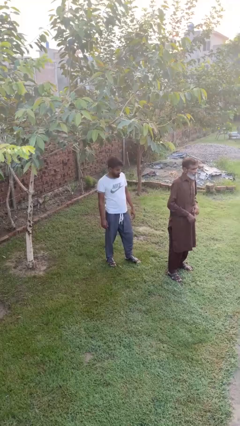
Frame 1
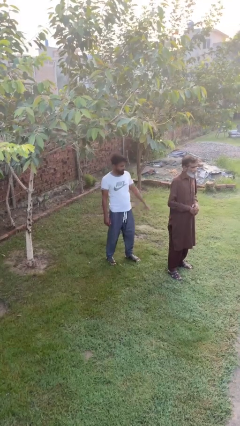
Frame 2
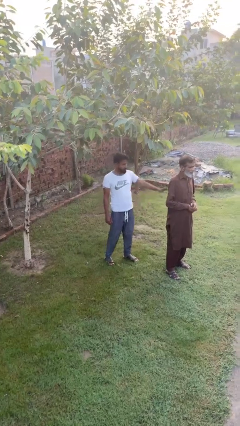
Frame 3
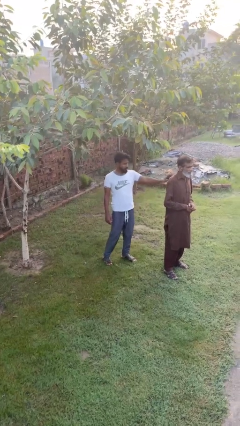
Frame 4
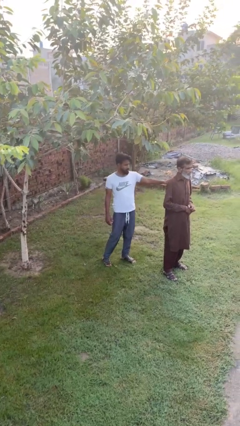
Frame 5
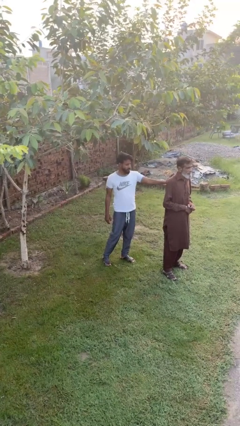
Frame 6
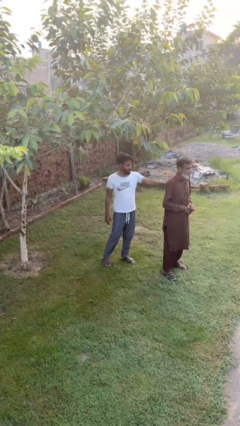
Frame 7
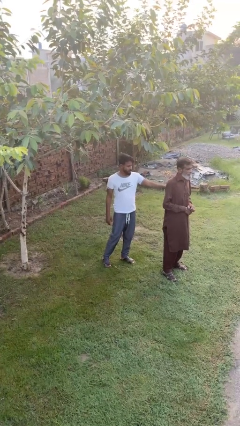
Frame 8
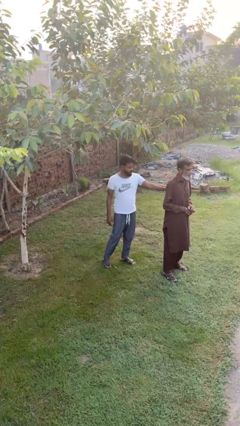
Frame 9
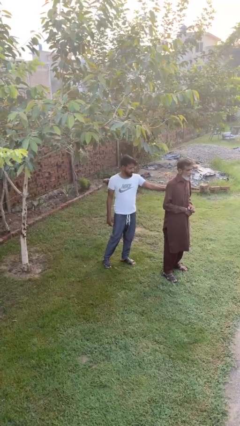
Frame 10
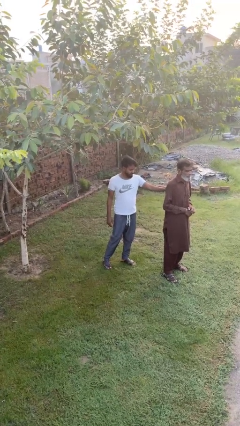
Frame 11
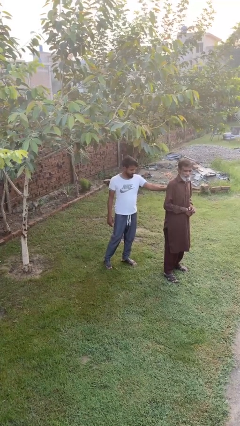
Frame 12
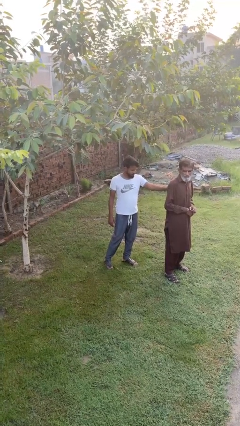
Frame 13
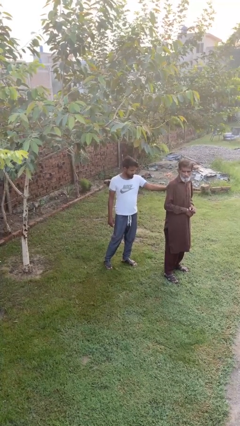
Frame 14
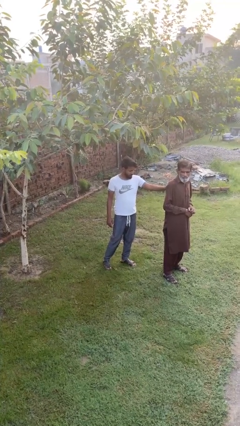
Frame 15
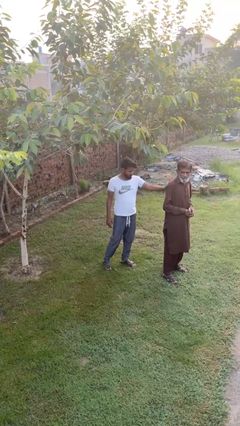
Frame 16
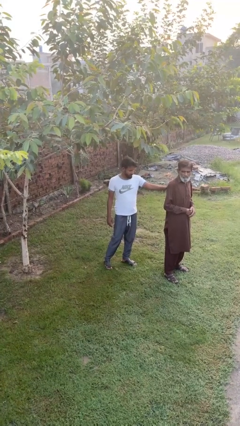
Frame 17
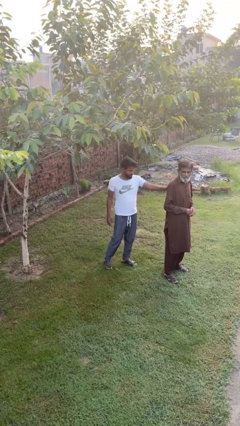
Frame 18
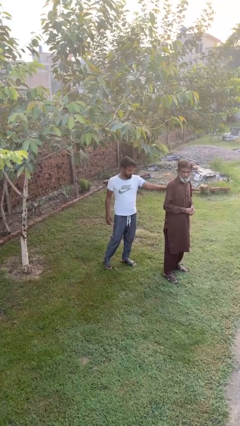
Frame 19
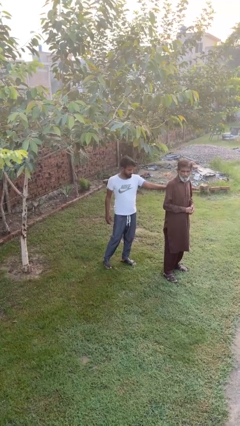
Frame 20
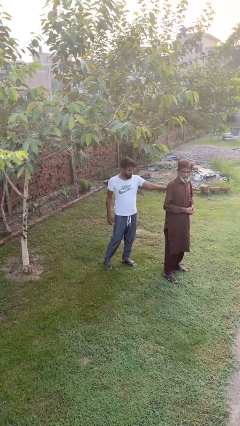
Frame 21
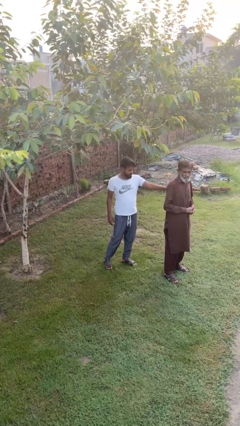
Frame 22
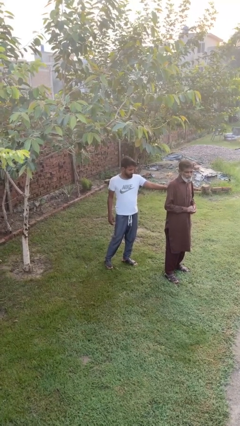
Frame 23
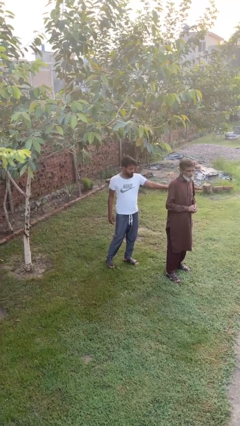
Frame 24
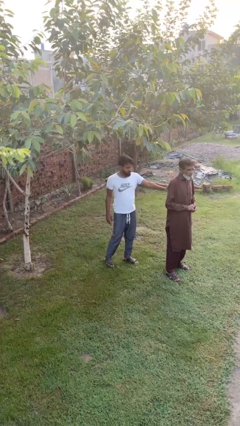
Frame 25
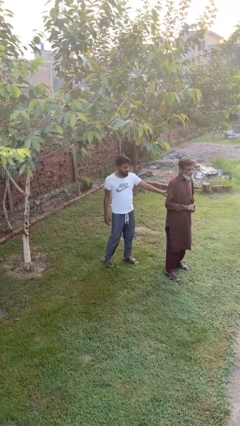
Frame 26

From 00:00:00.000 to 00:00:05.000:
person touches back of person

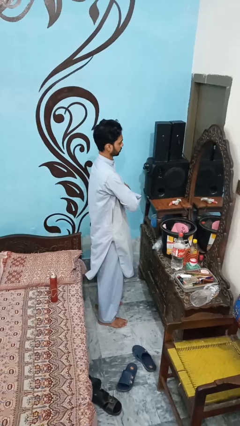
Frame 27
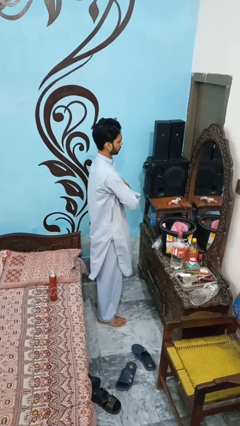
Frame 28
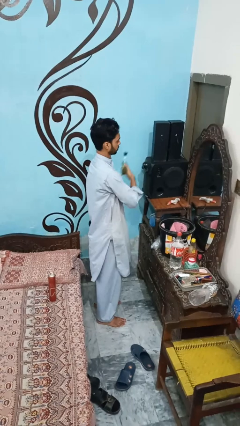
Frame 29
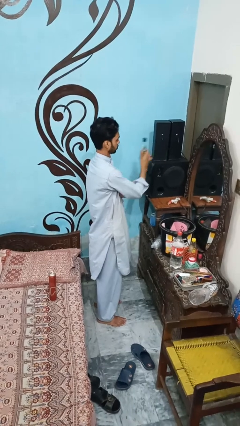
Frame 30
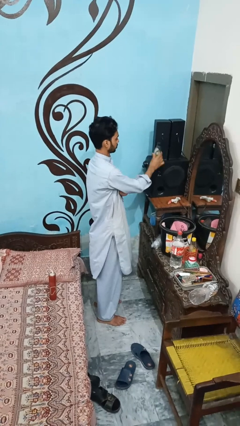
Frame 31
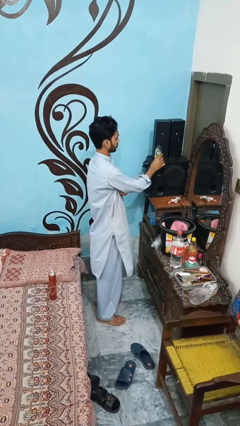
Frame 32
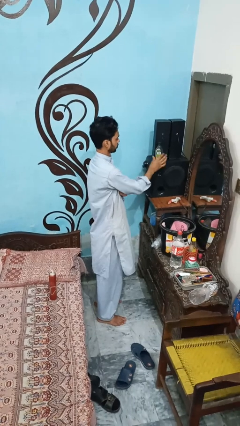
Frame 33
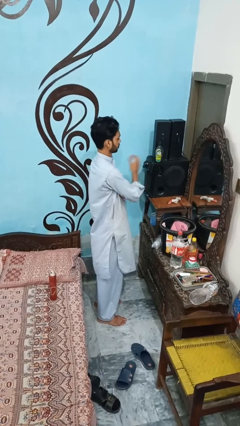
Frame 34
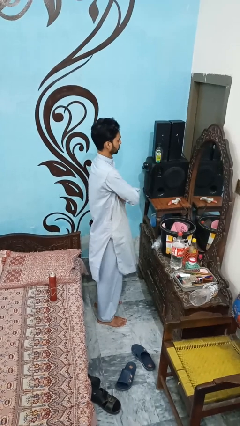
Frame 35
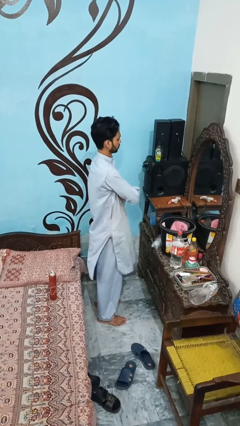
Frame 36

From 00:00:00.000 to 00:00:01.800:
person picks up object from shelf

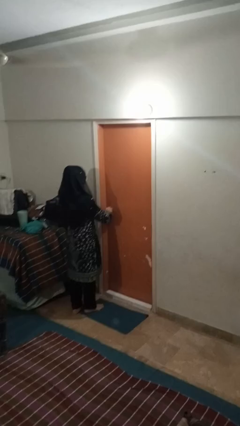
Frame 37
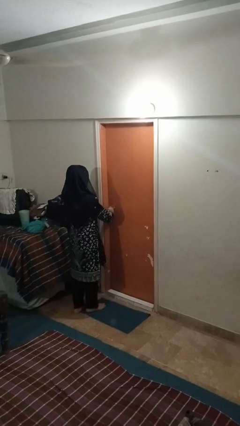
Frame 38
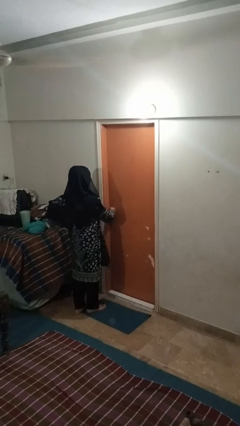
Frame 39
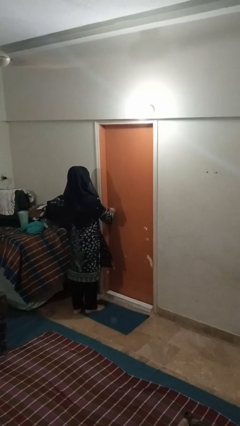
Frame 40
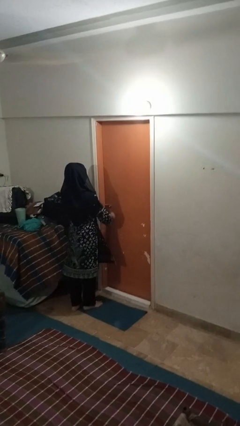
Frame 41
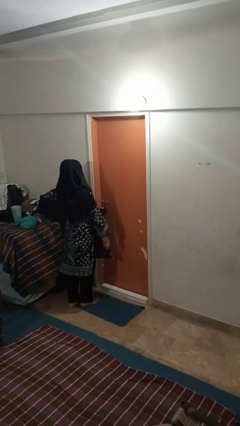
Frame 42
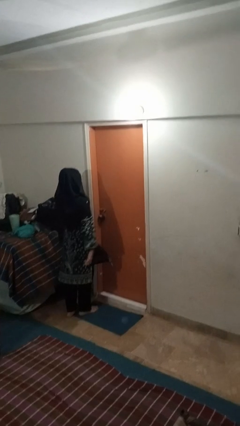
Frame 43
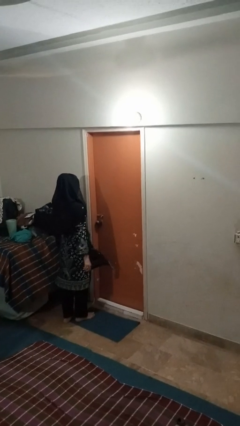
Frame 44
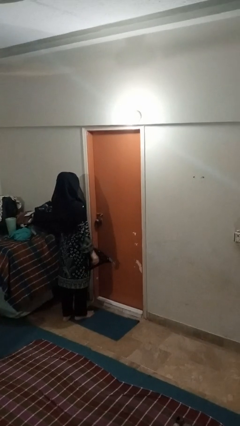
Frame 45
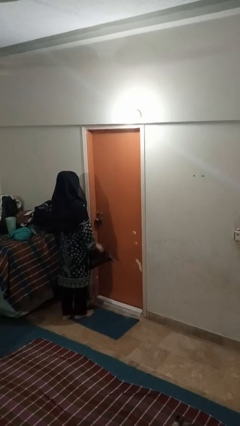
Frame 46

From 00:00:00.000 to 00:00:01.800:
person unlocks door with keys

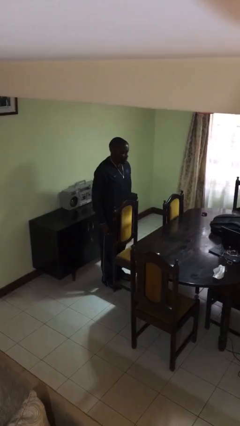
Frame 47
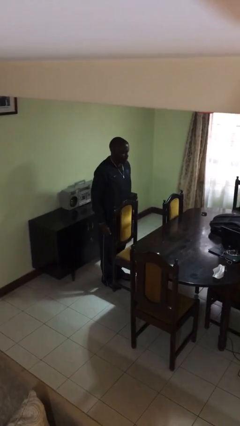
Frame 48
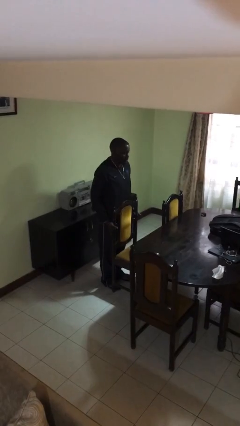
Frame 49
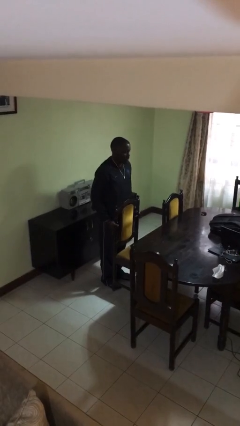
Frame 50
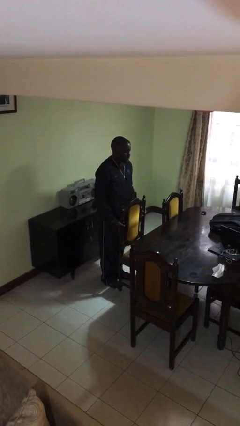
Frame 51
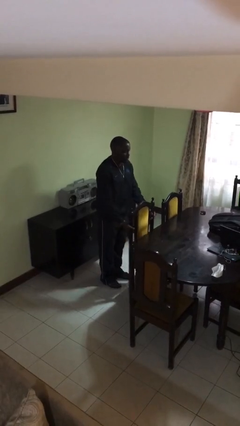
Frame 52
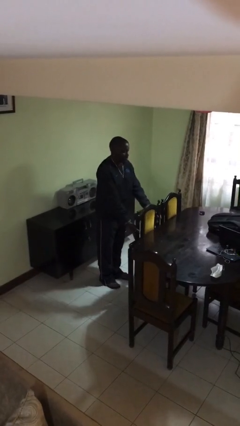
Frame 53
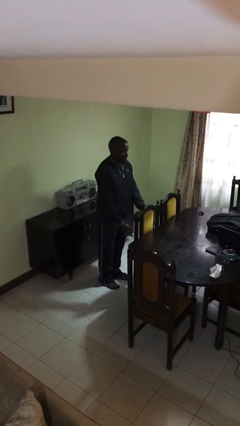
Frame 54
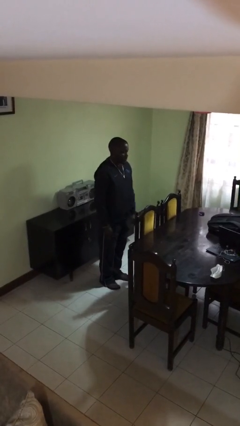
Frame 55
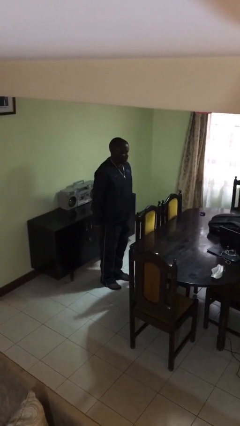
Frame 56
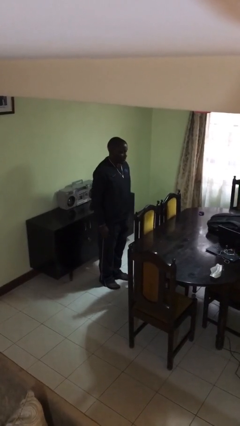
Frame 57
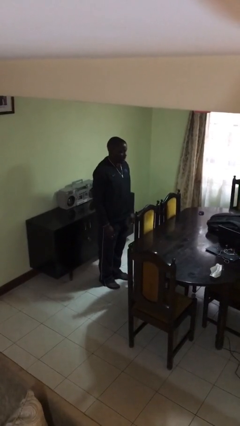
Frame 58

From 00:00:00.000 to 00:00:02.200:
person pushes in chair

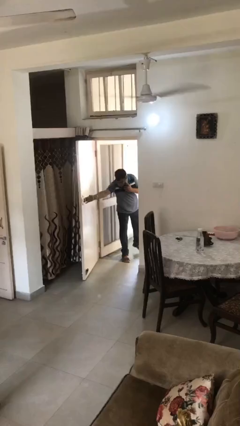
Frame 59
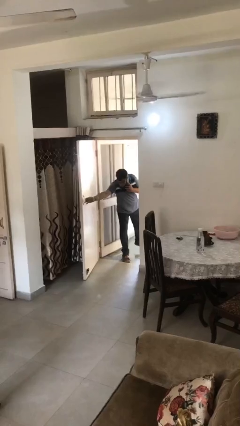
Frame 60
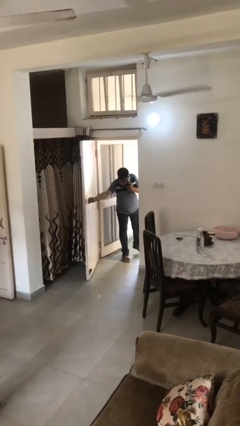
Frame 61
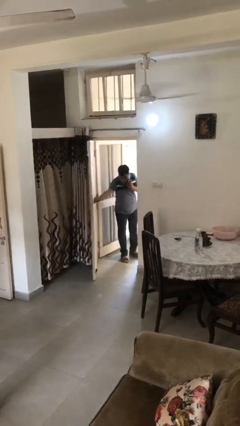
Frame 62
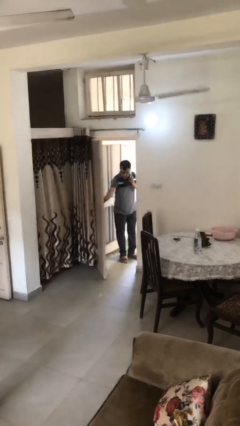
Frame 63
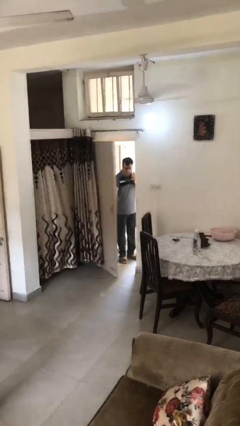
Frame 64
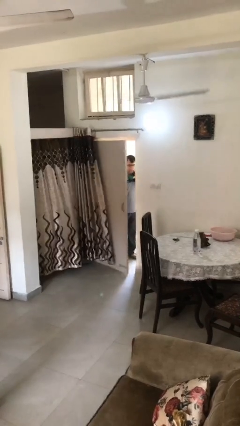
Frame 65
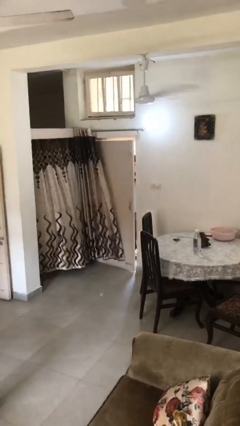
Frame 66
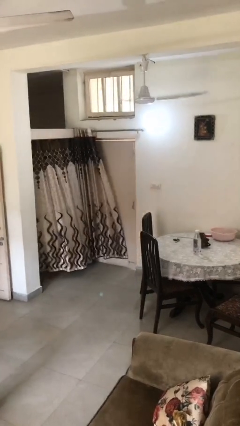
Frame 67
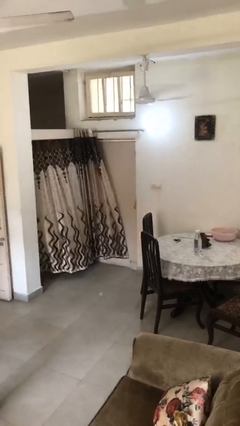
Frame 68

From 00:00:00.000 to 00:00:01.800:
person closes facility door

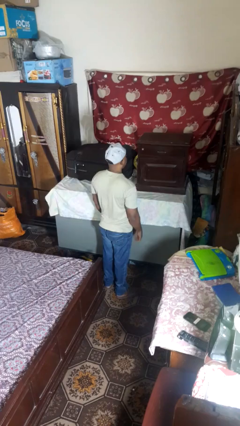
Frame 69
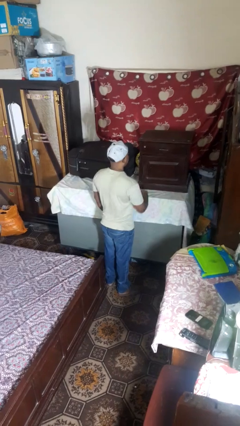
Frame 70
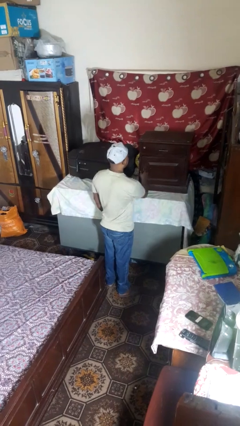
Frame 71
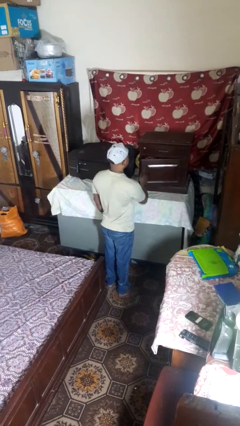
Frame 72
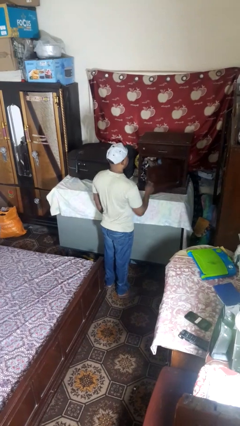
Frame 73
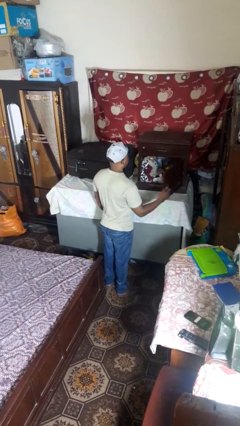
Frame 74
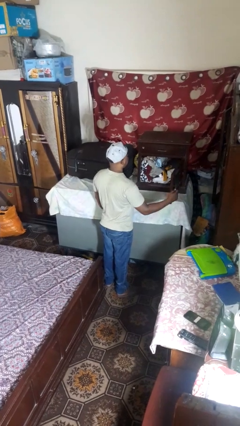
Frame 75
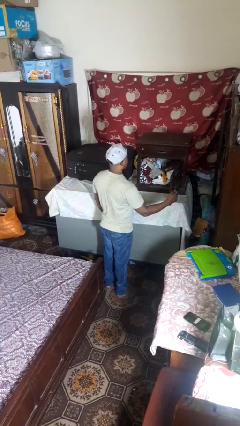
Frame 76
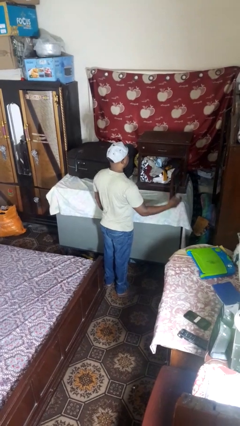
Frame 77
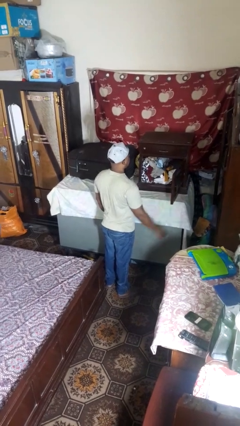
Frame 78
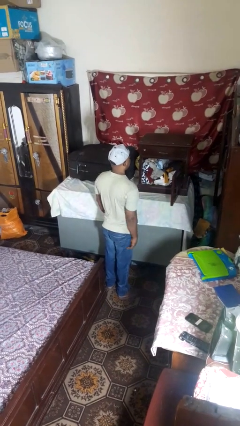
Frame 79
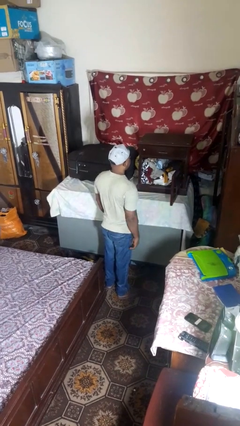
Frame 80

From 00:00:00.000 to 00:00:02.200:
person opens closet door

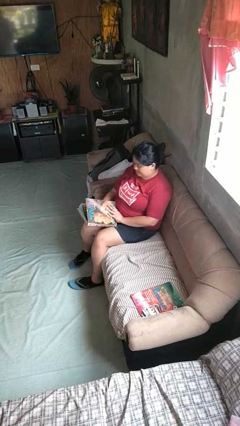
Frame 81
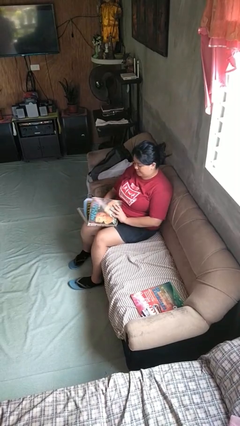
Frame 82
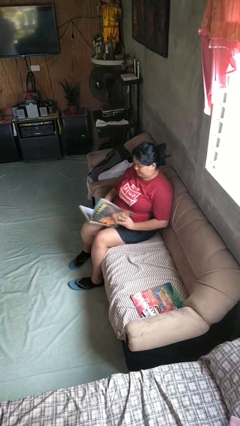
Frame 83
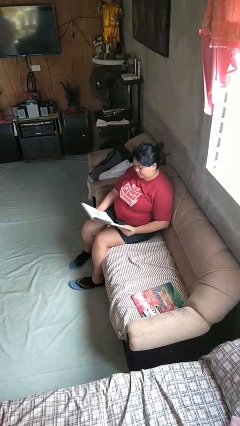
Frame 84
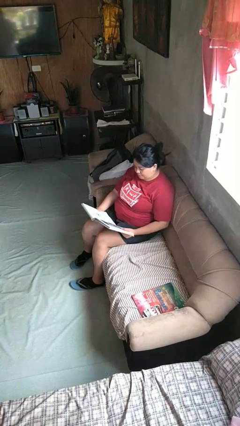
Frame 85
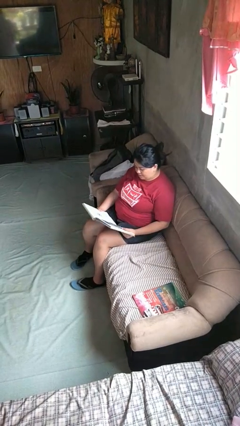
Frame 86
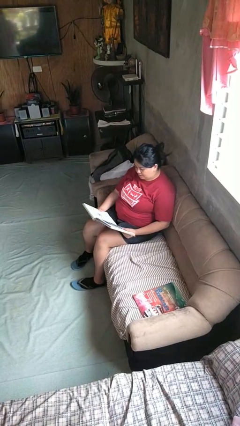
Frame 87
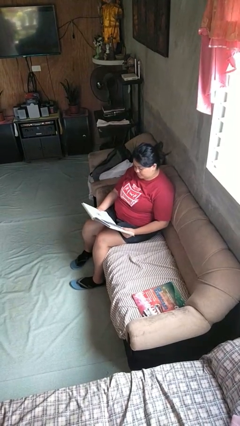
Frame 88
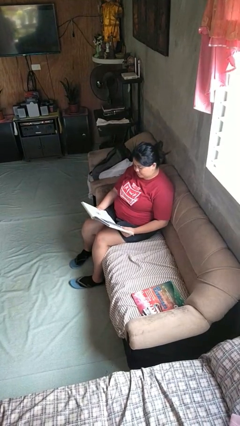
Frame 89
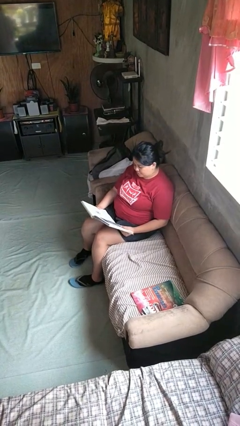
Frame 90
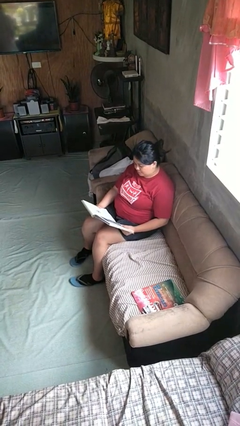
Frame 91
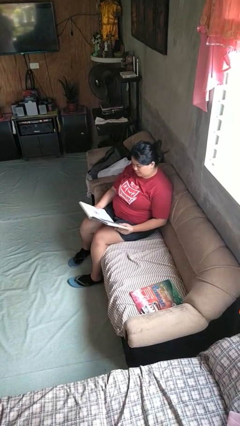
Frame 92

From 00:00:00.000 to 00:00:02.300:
person reads book

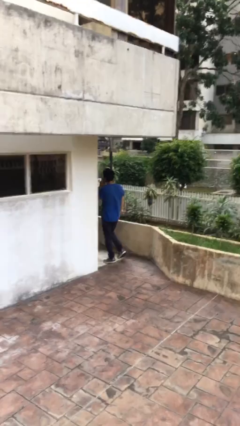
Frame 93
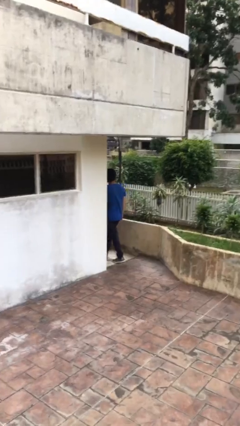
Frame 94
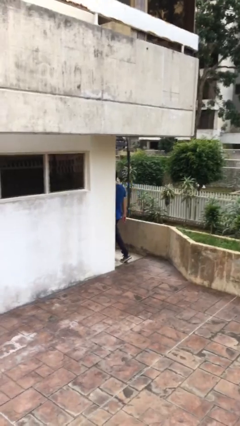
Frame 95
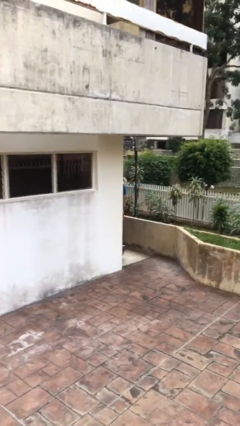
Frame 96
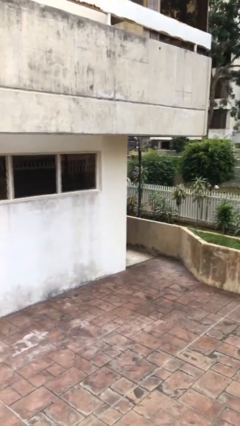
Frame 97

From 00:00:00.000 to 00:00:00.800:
person exits scene through structure
